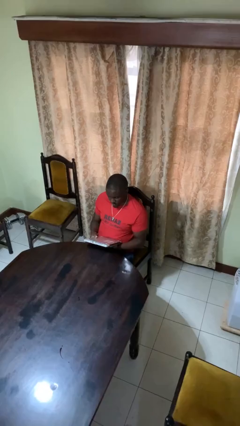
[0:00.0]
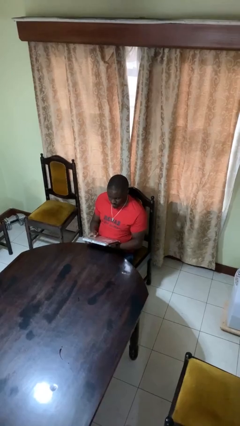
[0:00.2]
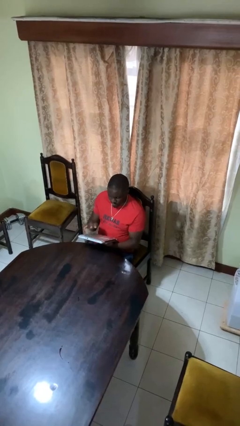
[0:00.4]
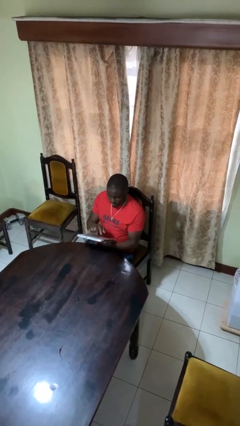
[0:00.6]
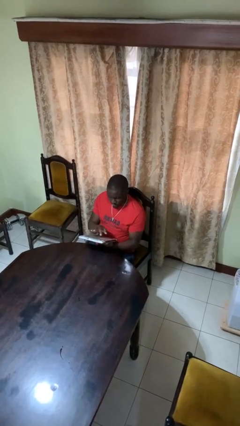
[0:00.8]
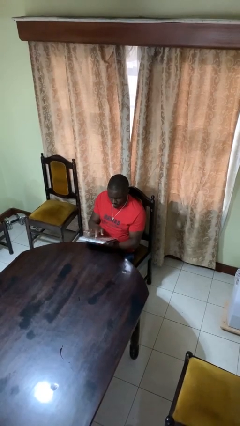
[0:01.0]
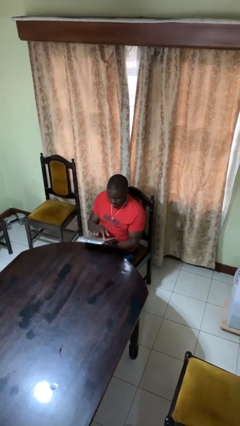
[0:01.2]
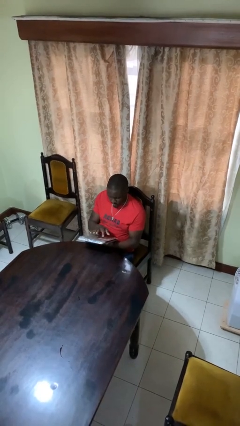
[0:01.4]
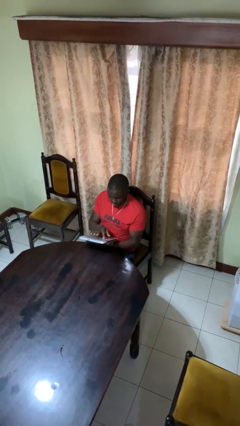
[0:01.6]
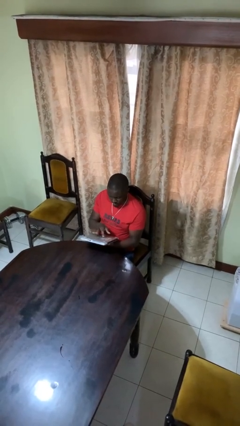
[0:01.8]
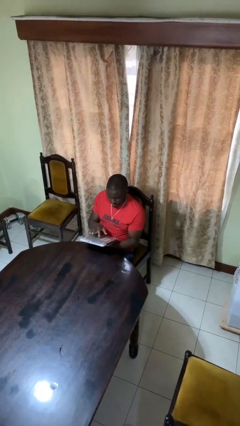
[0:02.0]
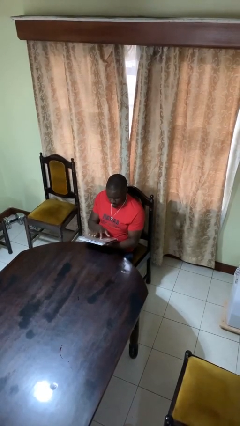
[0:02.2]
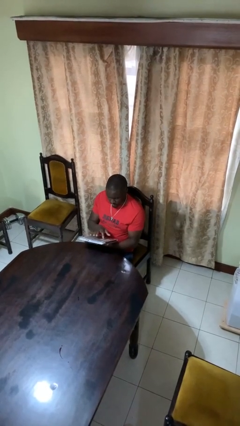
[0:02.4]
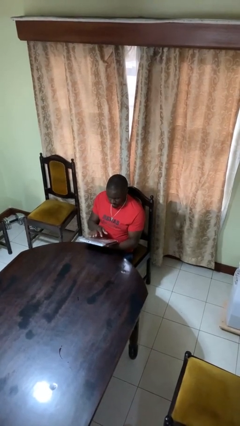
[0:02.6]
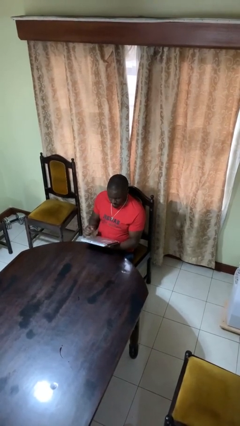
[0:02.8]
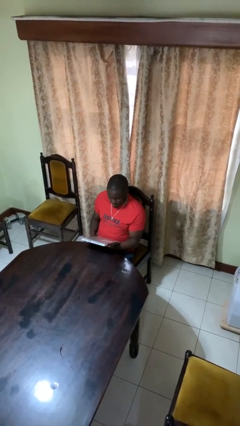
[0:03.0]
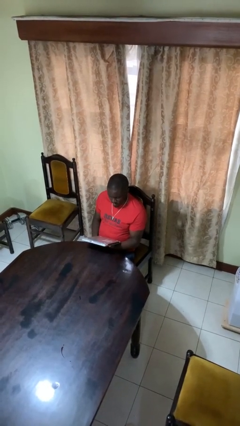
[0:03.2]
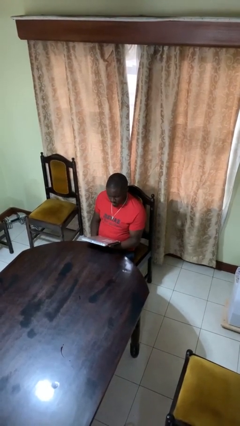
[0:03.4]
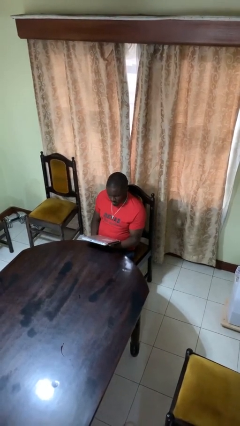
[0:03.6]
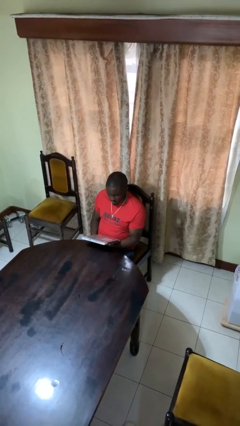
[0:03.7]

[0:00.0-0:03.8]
person interacts with tablet

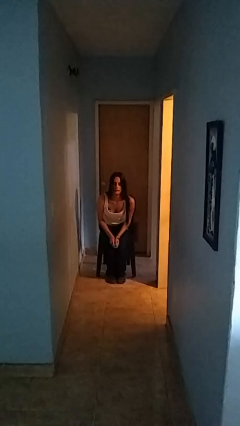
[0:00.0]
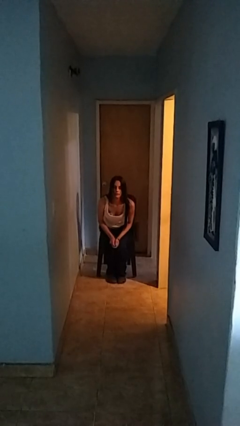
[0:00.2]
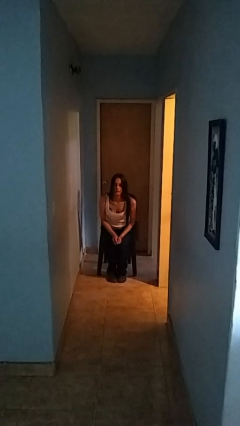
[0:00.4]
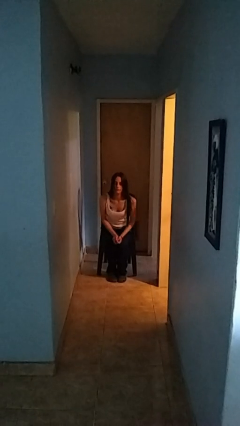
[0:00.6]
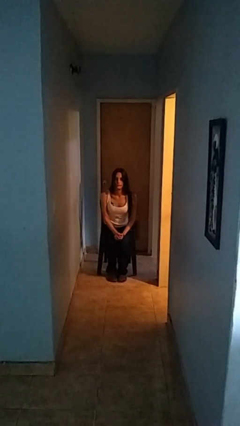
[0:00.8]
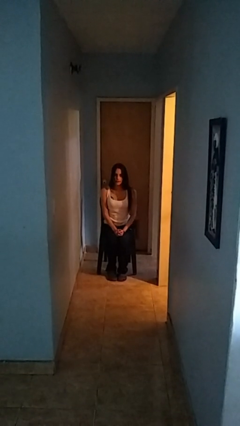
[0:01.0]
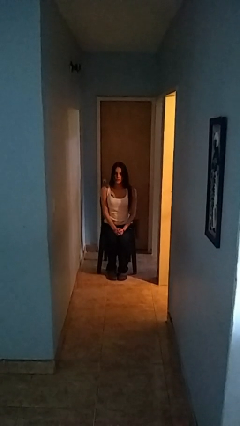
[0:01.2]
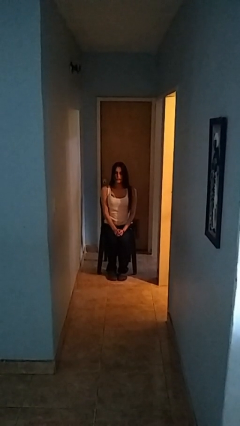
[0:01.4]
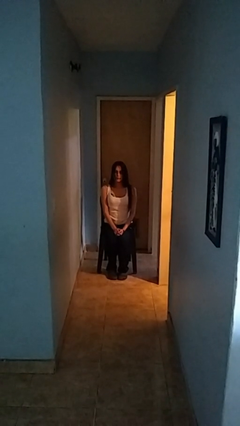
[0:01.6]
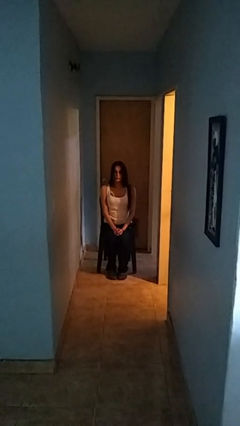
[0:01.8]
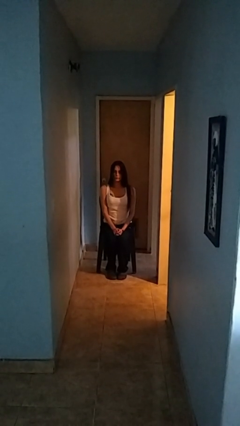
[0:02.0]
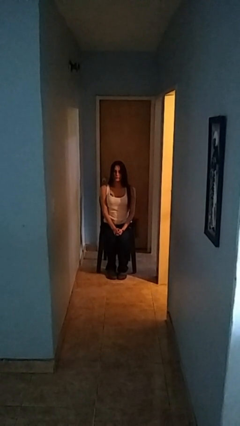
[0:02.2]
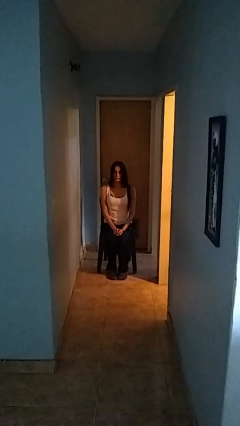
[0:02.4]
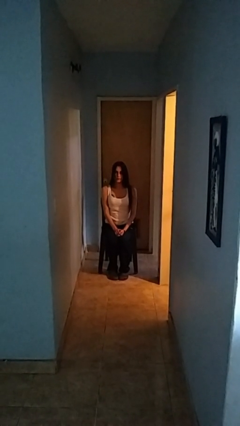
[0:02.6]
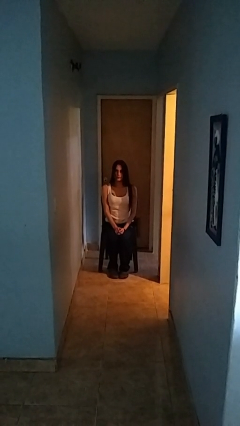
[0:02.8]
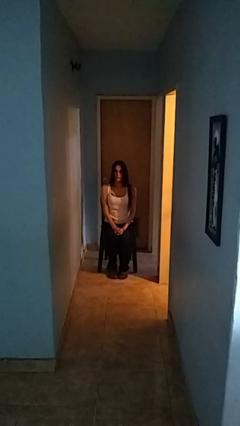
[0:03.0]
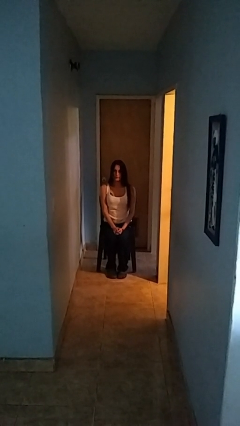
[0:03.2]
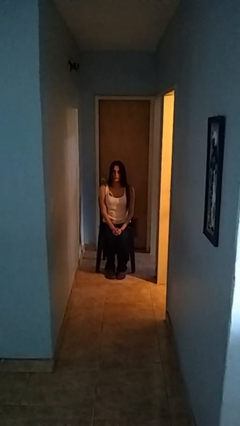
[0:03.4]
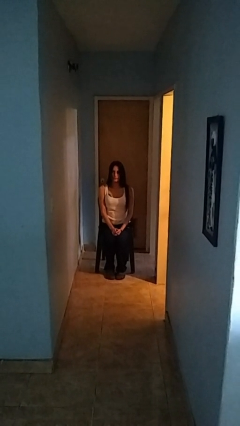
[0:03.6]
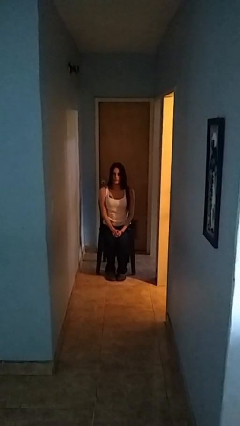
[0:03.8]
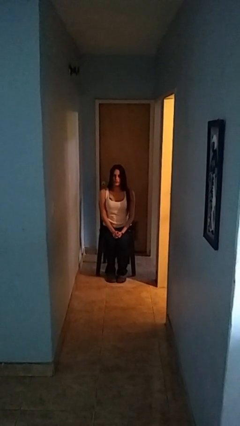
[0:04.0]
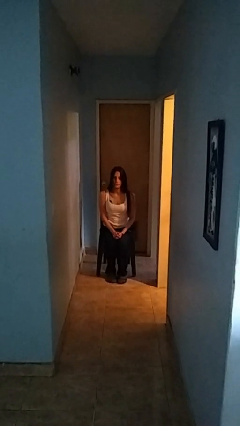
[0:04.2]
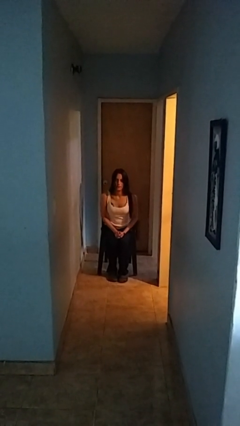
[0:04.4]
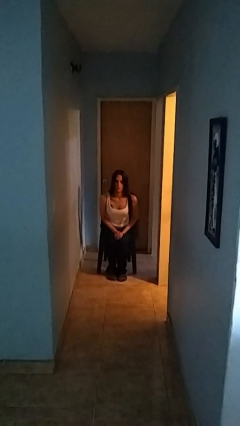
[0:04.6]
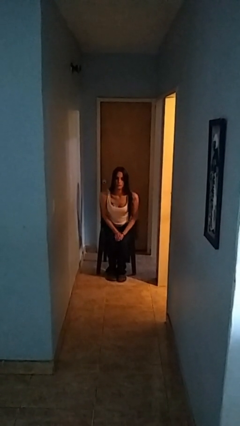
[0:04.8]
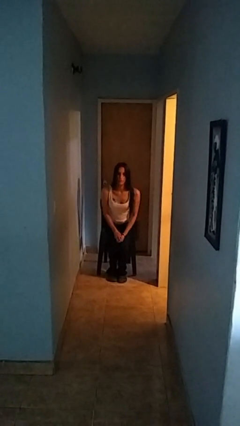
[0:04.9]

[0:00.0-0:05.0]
person sits down

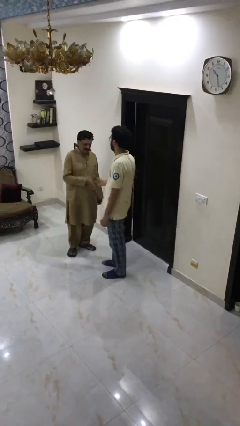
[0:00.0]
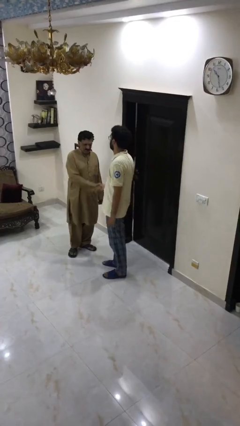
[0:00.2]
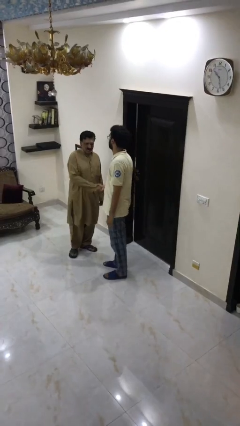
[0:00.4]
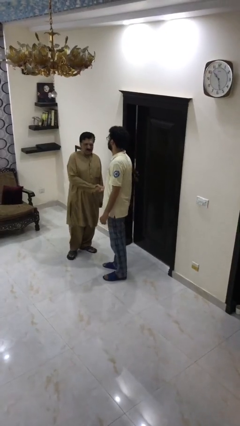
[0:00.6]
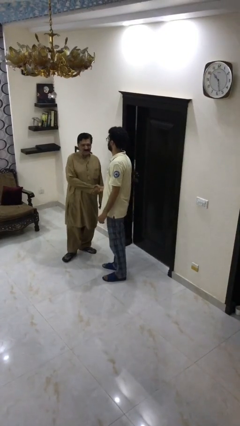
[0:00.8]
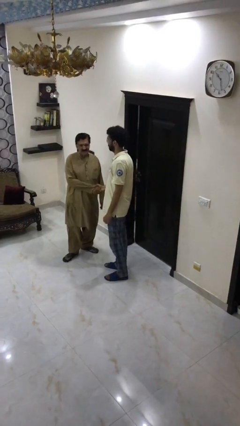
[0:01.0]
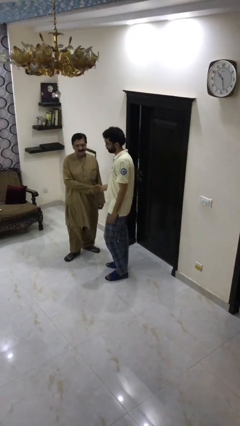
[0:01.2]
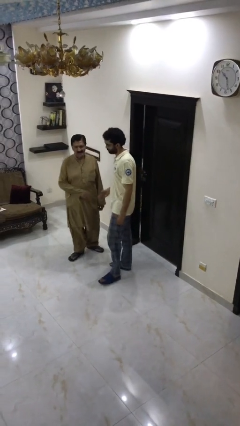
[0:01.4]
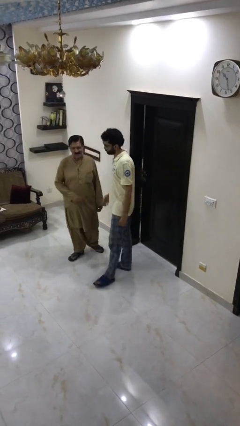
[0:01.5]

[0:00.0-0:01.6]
person shakes hand

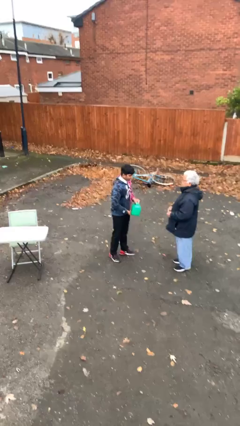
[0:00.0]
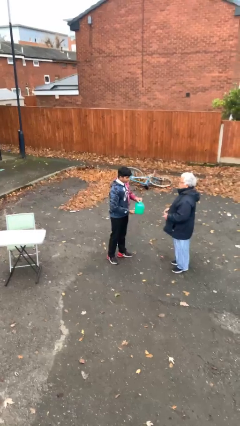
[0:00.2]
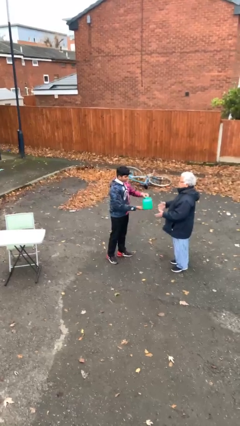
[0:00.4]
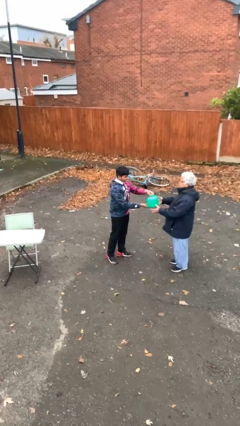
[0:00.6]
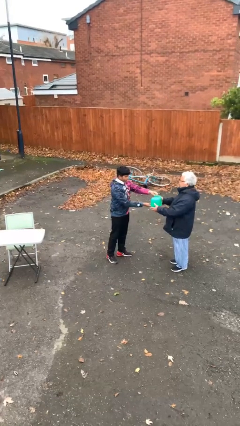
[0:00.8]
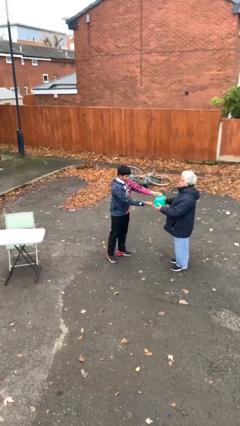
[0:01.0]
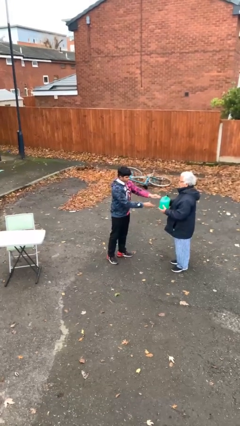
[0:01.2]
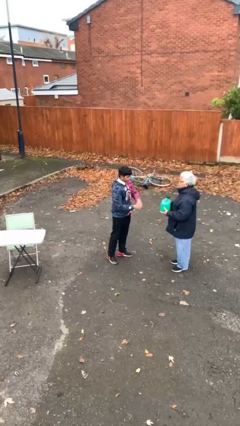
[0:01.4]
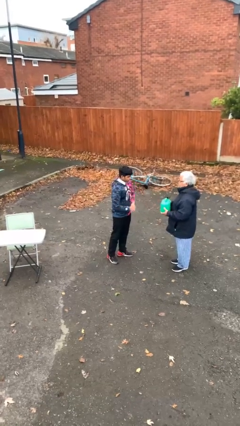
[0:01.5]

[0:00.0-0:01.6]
person transfers object to person

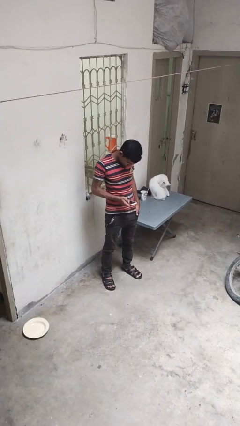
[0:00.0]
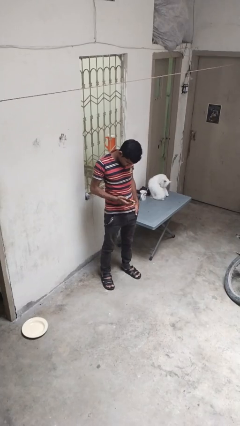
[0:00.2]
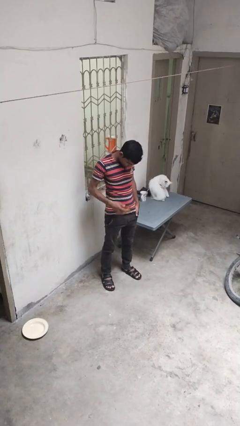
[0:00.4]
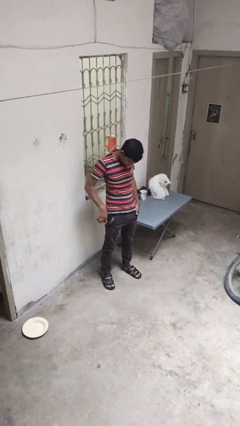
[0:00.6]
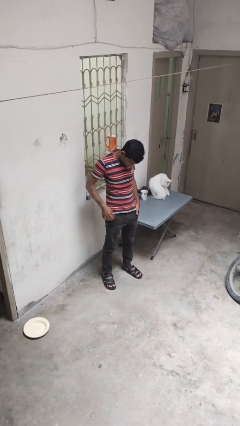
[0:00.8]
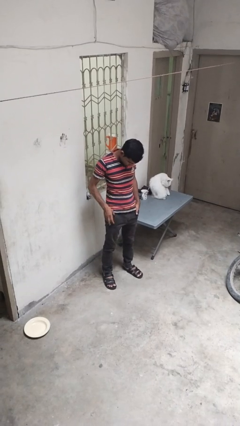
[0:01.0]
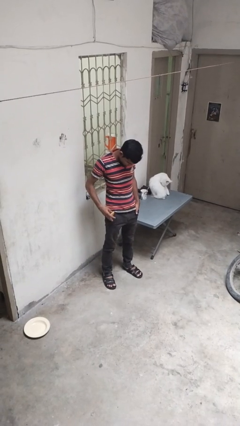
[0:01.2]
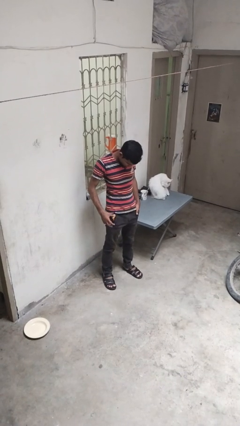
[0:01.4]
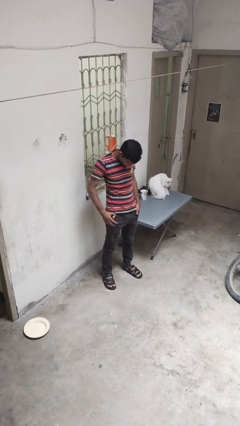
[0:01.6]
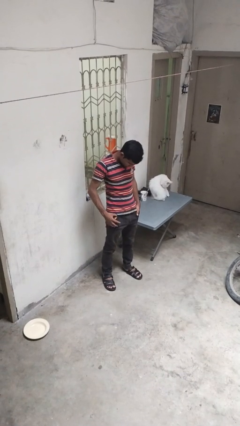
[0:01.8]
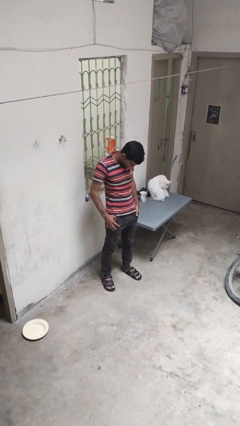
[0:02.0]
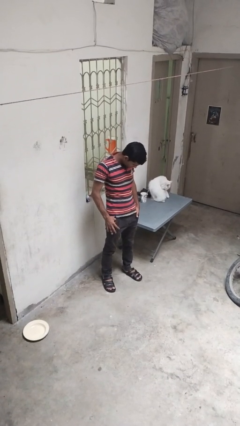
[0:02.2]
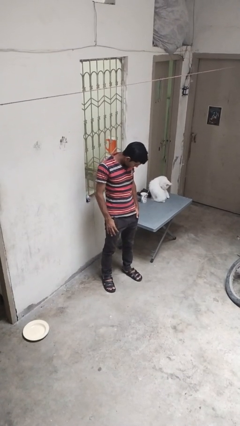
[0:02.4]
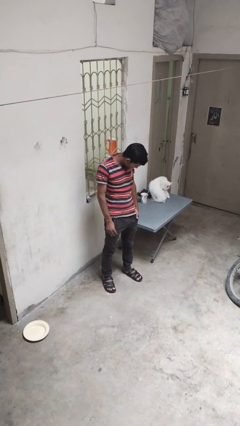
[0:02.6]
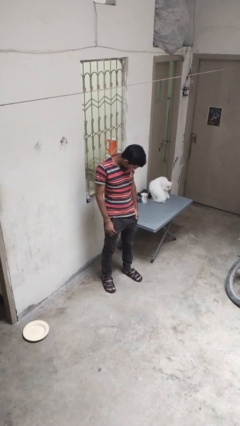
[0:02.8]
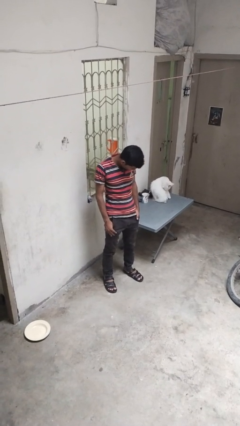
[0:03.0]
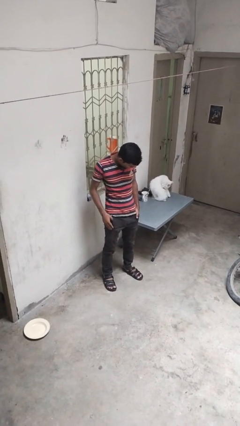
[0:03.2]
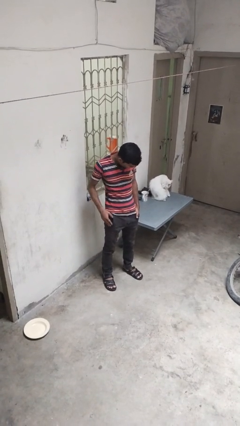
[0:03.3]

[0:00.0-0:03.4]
person puts phone into pocket

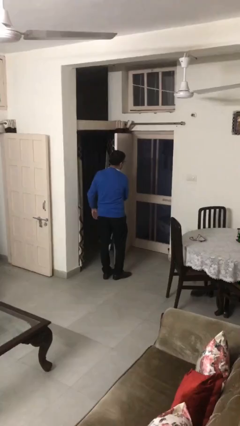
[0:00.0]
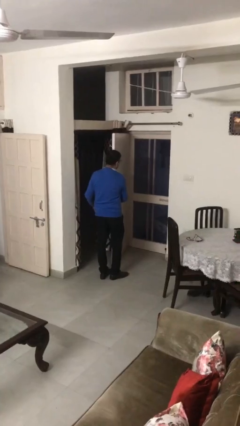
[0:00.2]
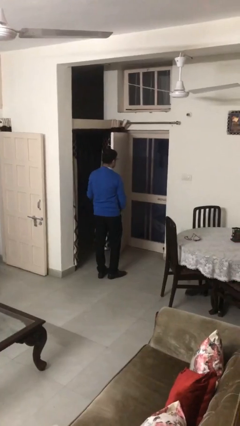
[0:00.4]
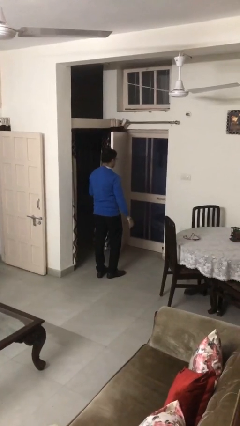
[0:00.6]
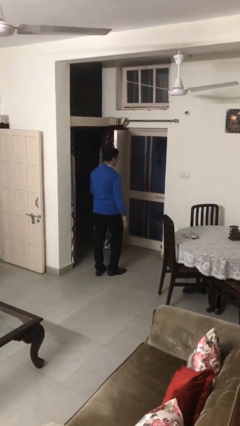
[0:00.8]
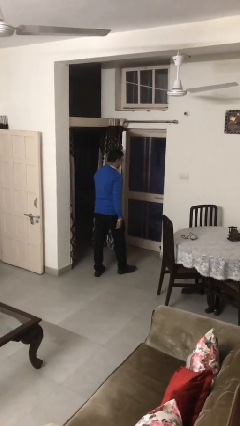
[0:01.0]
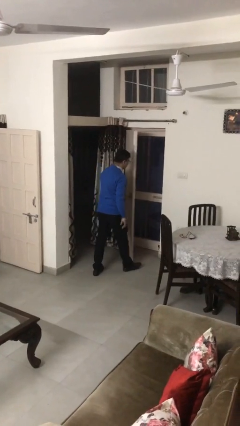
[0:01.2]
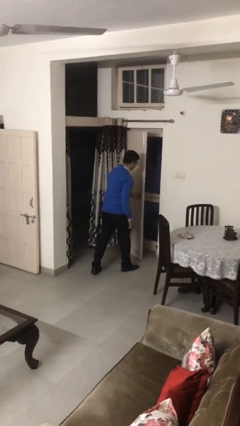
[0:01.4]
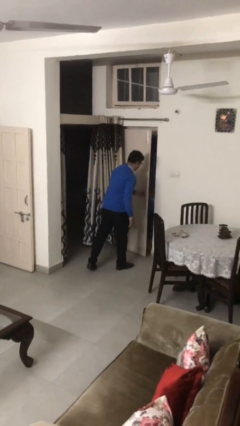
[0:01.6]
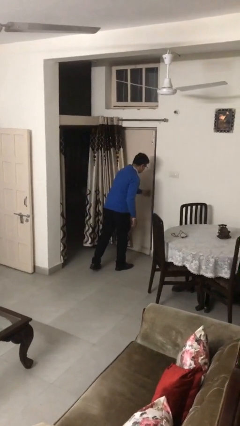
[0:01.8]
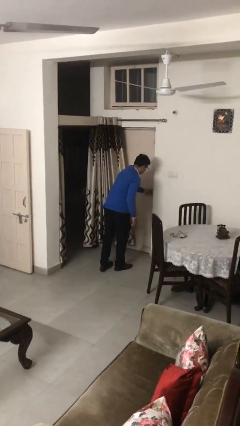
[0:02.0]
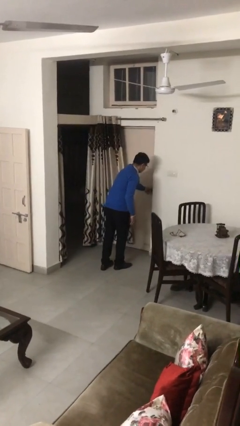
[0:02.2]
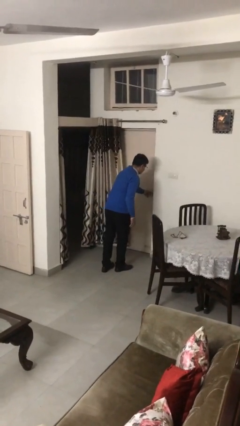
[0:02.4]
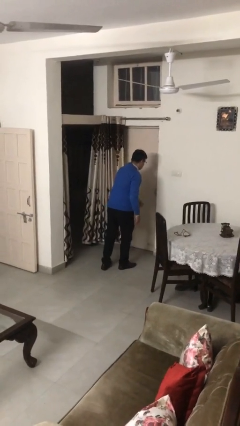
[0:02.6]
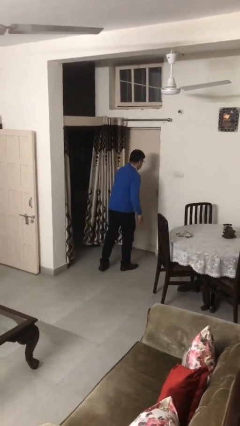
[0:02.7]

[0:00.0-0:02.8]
person closes facility door
